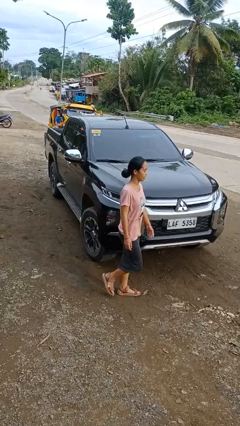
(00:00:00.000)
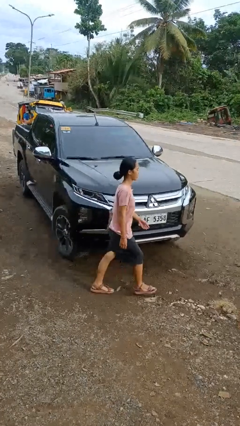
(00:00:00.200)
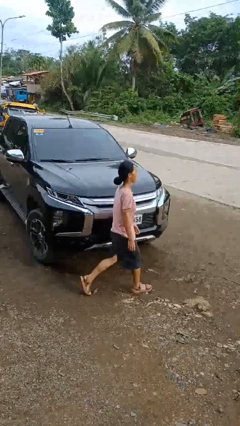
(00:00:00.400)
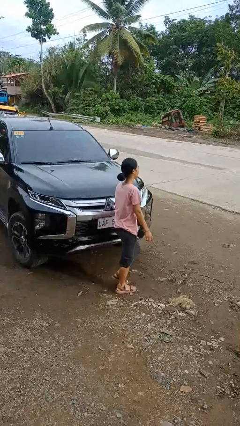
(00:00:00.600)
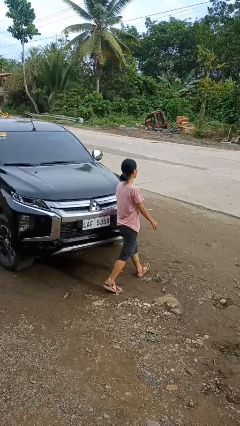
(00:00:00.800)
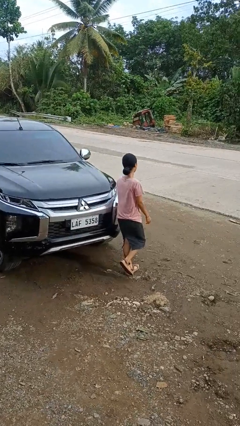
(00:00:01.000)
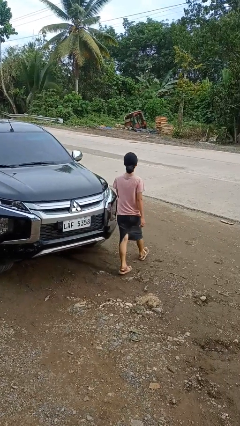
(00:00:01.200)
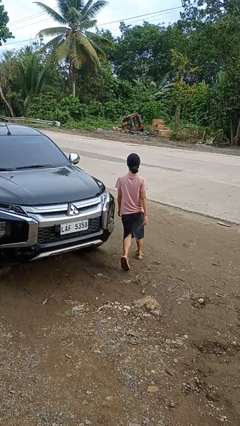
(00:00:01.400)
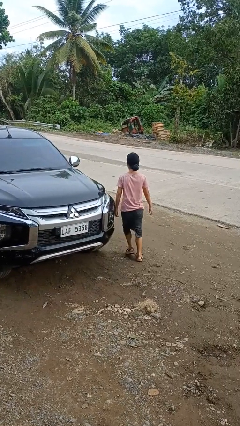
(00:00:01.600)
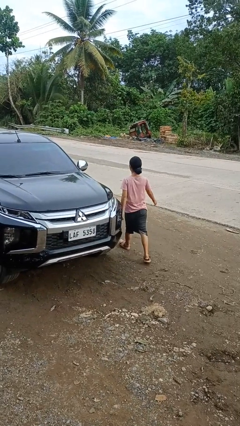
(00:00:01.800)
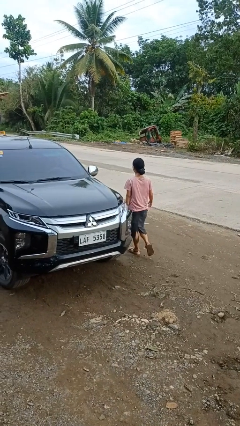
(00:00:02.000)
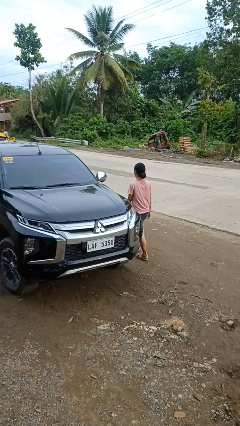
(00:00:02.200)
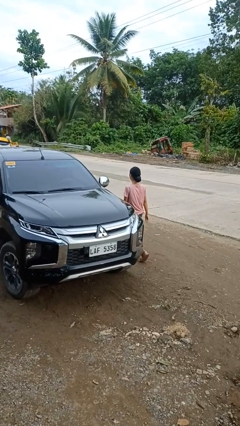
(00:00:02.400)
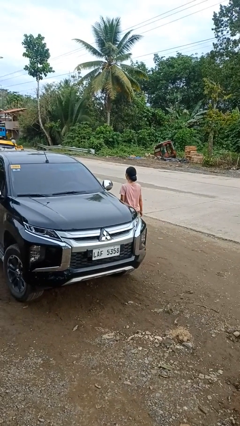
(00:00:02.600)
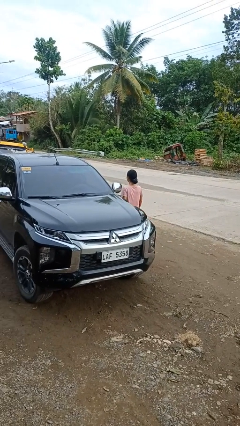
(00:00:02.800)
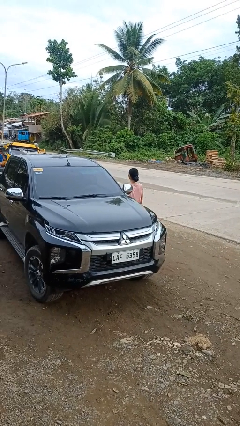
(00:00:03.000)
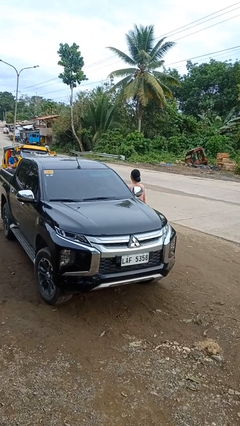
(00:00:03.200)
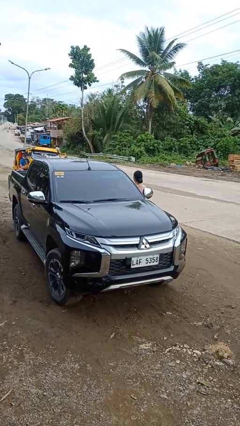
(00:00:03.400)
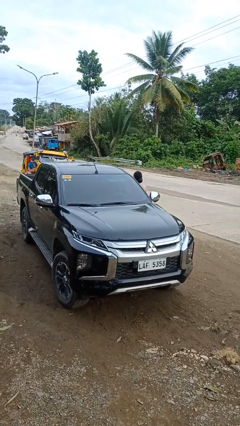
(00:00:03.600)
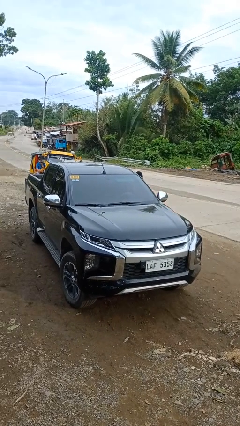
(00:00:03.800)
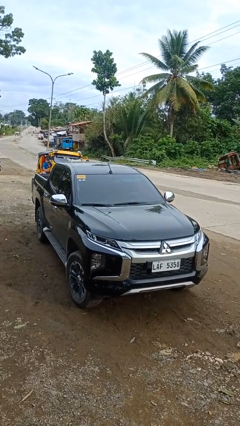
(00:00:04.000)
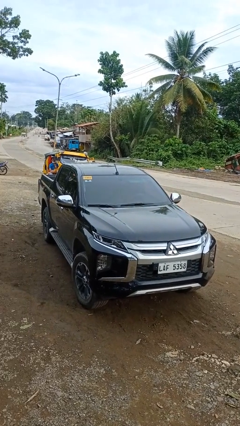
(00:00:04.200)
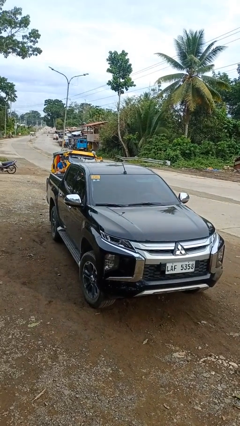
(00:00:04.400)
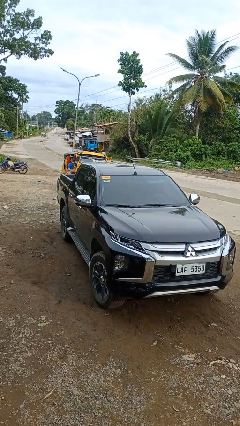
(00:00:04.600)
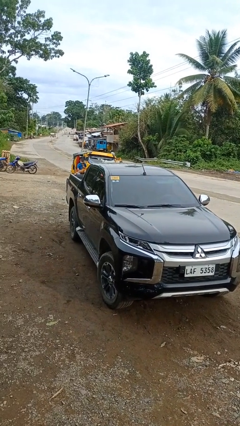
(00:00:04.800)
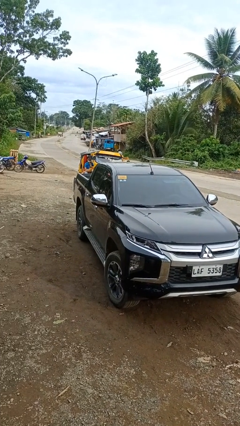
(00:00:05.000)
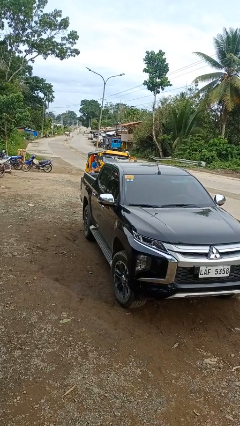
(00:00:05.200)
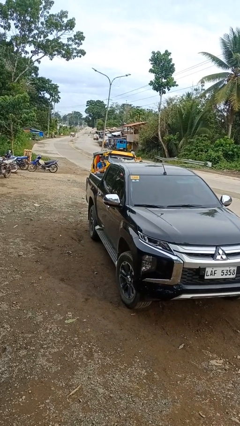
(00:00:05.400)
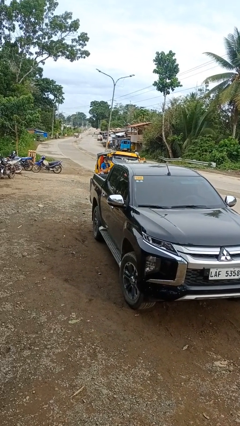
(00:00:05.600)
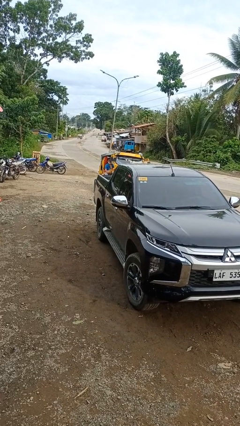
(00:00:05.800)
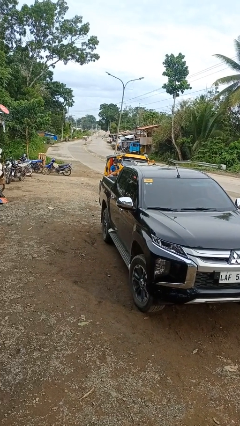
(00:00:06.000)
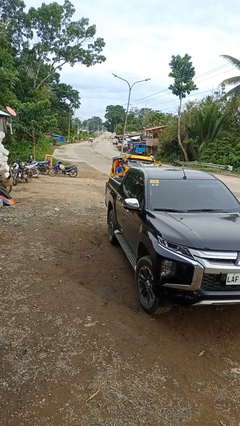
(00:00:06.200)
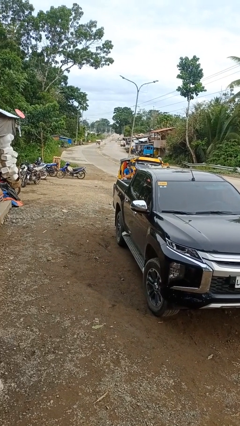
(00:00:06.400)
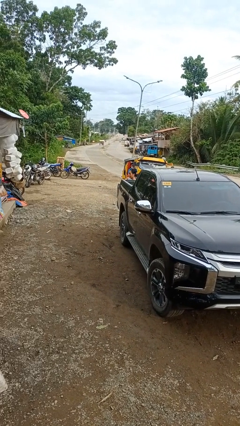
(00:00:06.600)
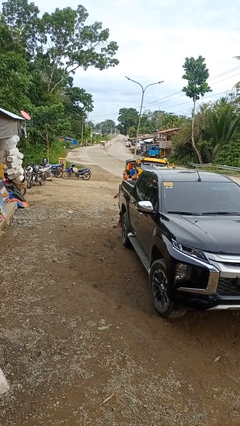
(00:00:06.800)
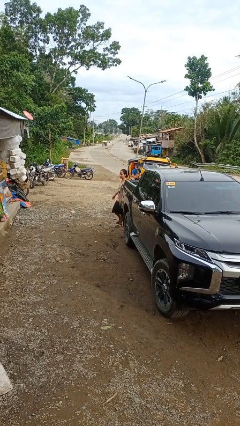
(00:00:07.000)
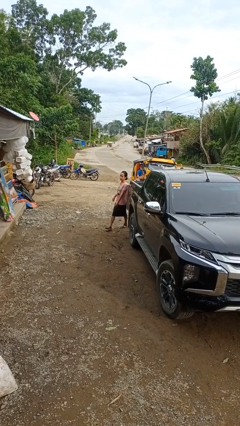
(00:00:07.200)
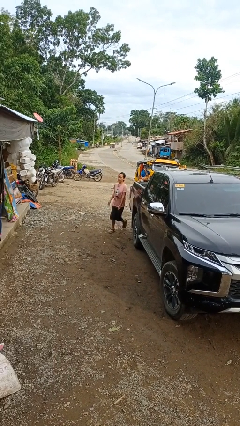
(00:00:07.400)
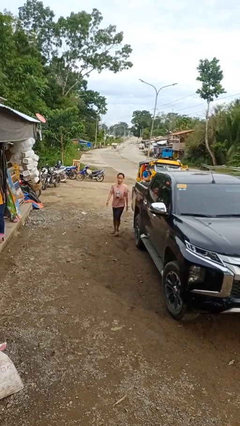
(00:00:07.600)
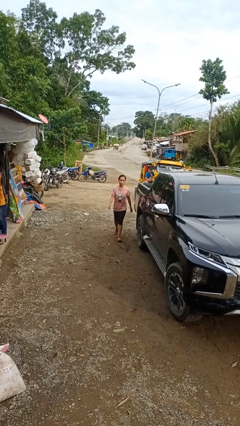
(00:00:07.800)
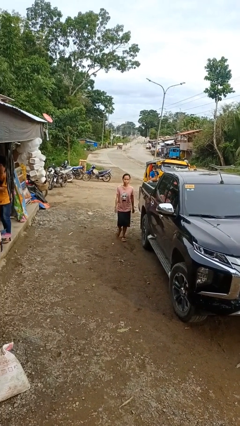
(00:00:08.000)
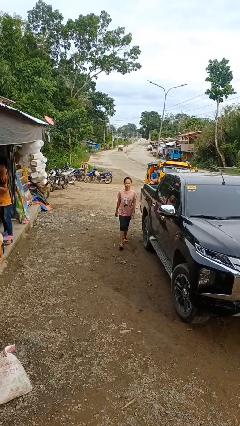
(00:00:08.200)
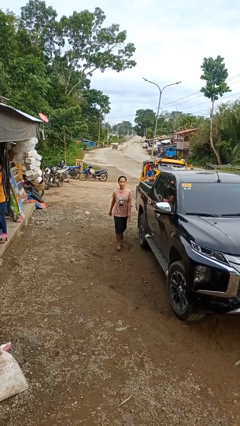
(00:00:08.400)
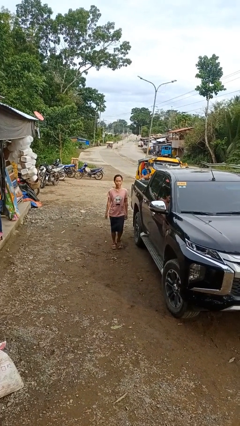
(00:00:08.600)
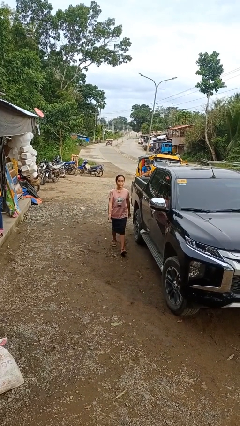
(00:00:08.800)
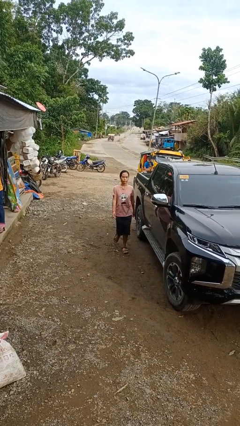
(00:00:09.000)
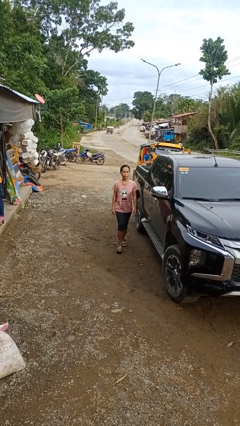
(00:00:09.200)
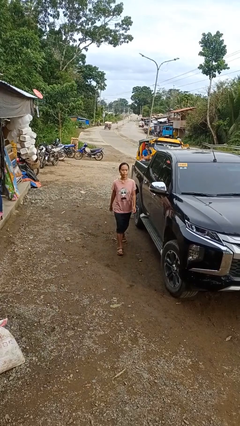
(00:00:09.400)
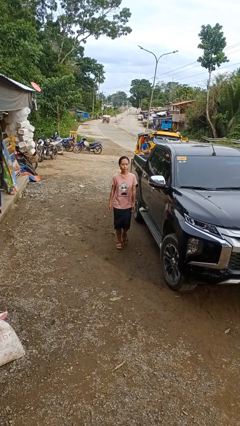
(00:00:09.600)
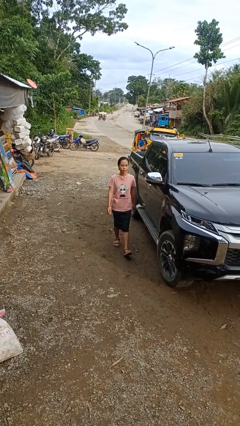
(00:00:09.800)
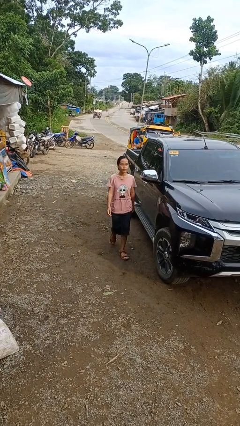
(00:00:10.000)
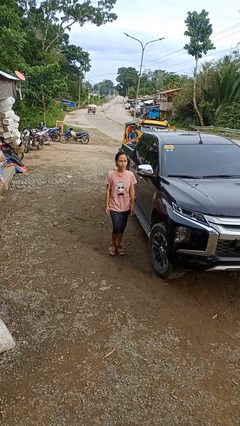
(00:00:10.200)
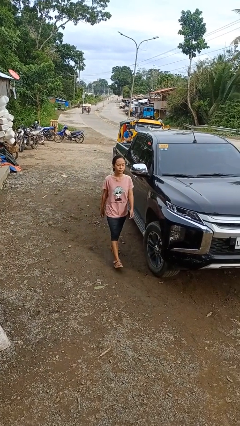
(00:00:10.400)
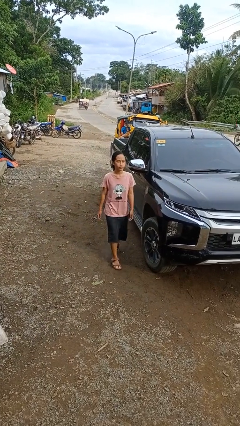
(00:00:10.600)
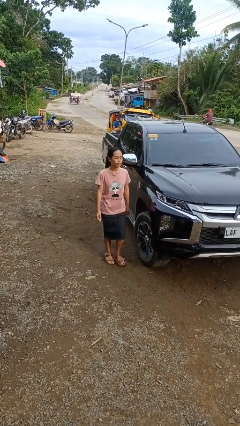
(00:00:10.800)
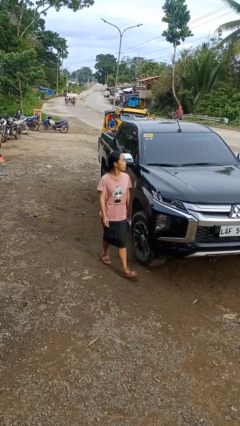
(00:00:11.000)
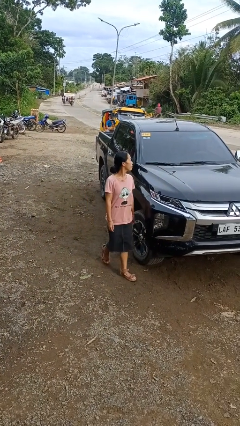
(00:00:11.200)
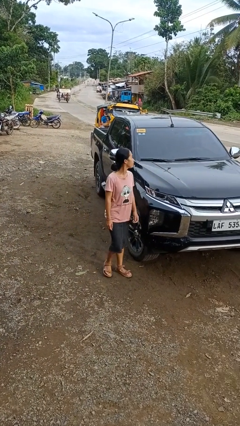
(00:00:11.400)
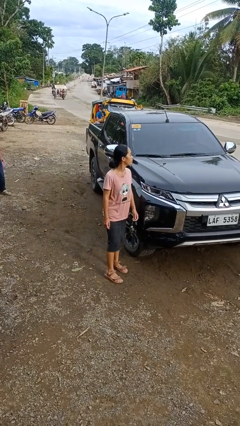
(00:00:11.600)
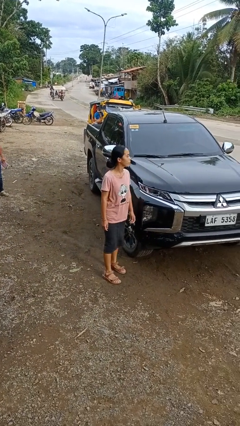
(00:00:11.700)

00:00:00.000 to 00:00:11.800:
person walks around car

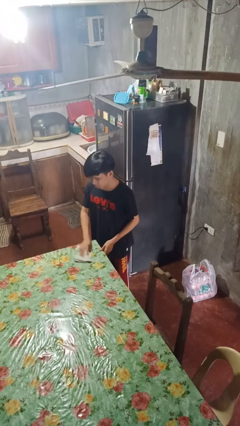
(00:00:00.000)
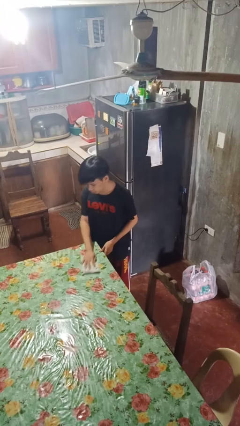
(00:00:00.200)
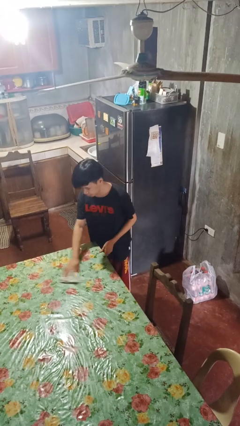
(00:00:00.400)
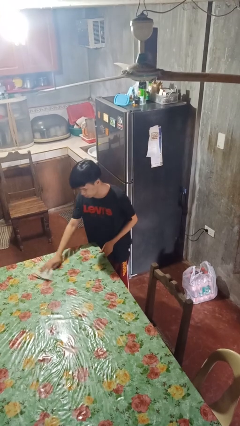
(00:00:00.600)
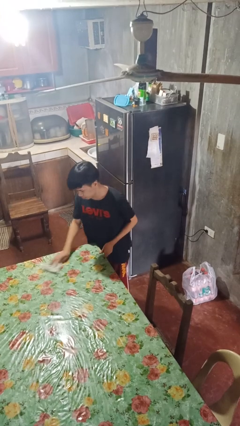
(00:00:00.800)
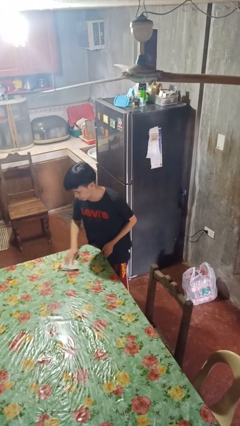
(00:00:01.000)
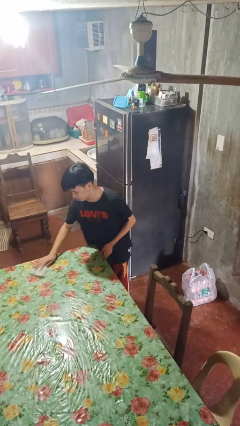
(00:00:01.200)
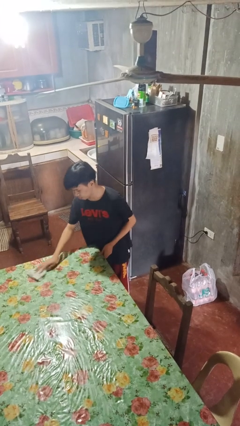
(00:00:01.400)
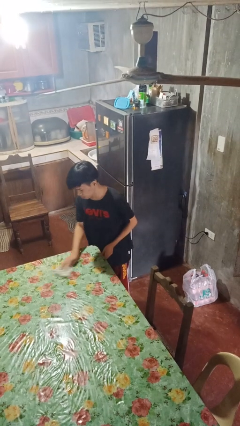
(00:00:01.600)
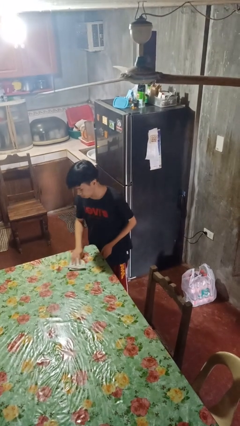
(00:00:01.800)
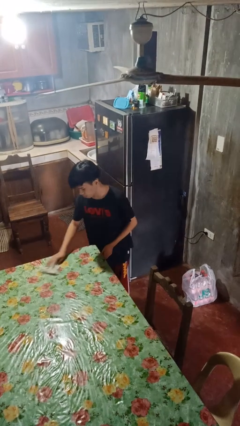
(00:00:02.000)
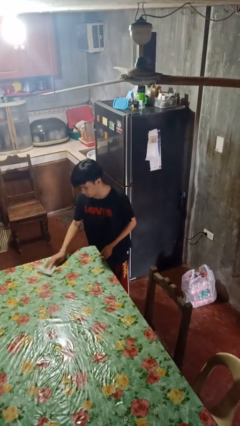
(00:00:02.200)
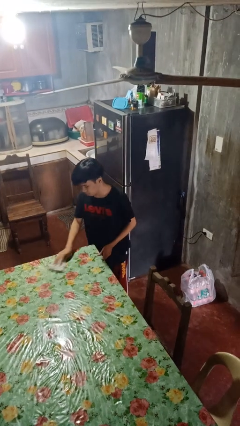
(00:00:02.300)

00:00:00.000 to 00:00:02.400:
person cleans table with rag

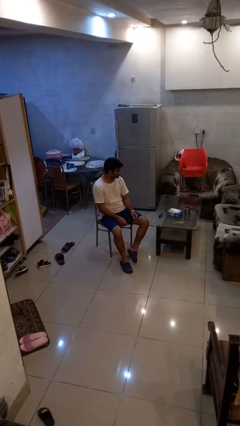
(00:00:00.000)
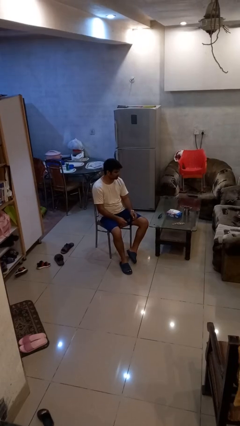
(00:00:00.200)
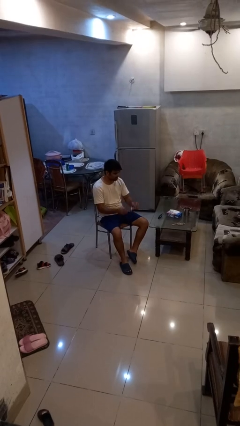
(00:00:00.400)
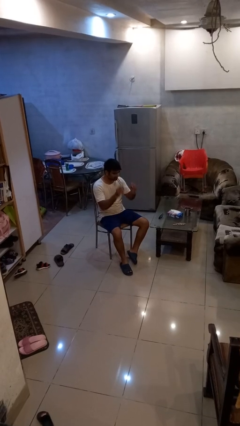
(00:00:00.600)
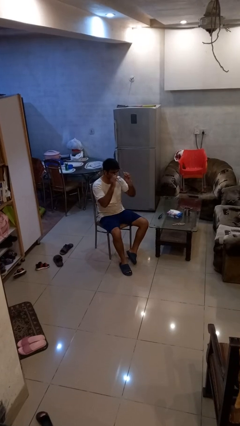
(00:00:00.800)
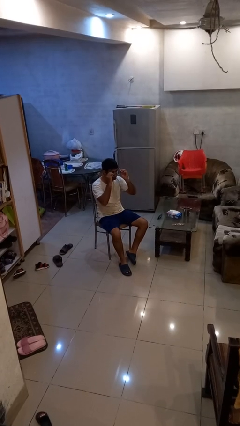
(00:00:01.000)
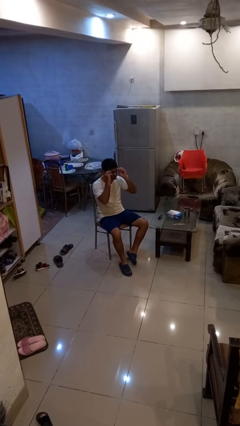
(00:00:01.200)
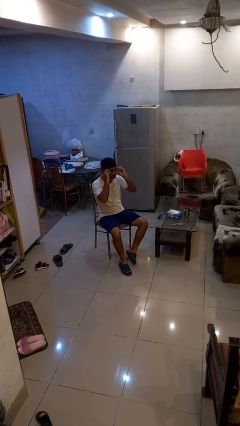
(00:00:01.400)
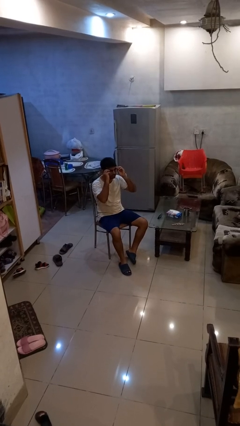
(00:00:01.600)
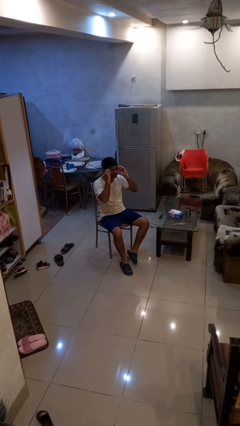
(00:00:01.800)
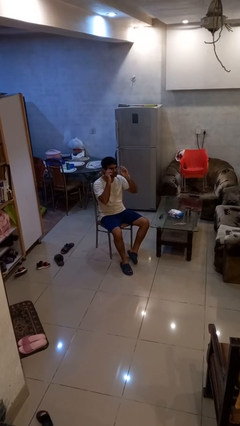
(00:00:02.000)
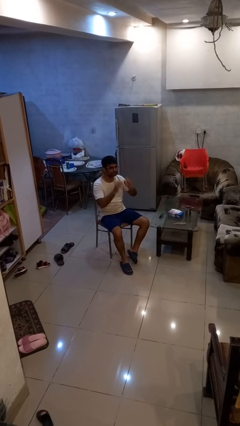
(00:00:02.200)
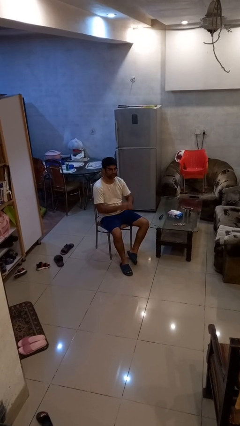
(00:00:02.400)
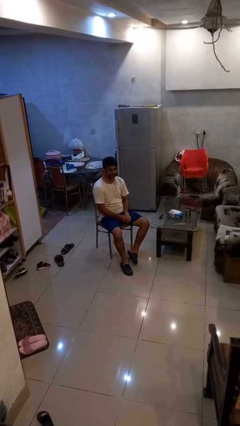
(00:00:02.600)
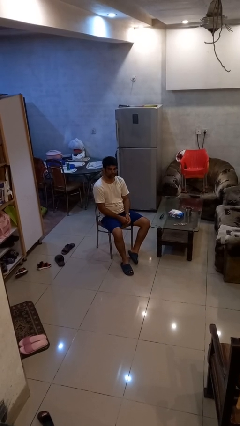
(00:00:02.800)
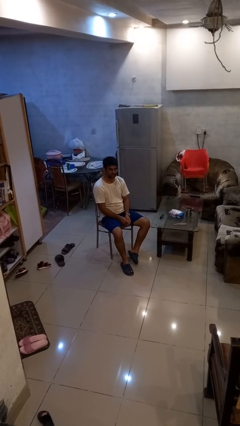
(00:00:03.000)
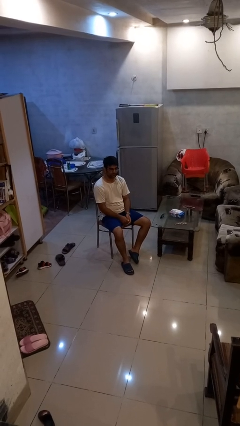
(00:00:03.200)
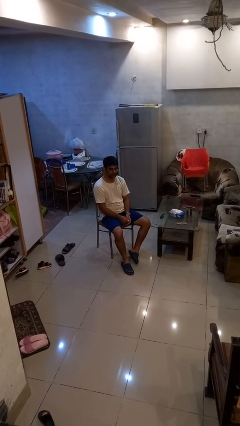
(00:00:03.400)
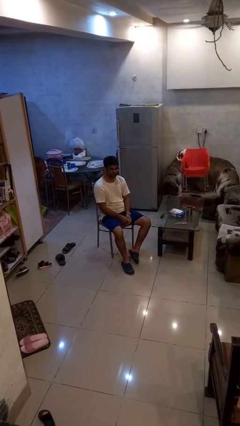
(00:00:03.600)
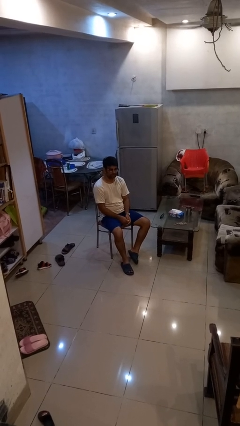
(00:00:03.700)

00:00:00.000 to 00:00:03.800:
person puts on glasses
